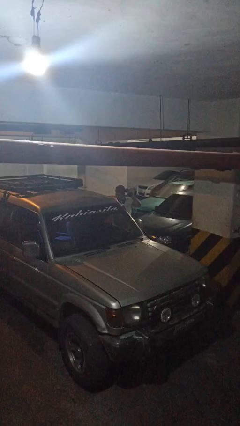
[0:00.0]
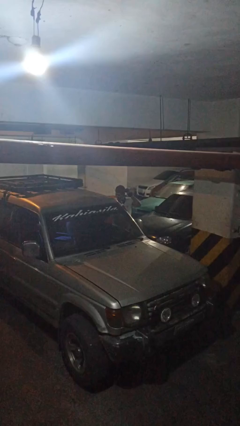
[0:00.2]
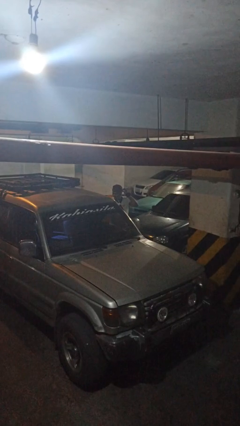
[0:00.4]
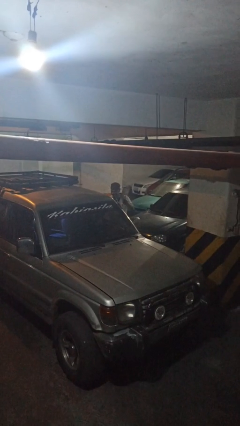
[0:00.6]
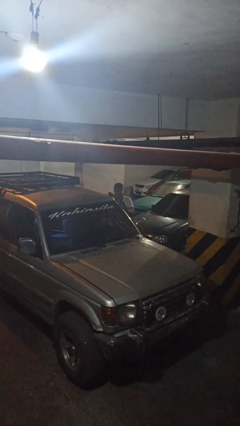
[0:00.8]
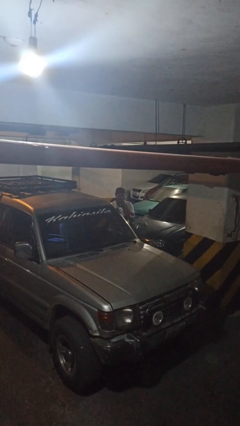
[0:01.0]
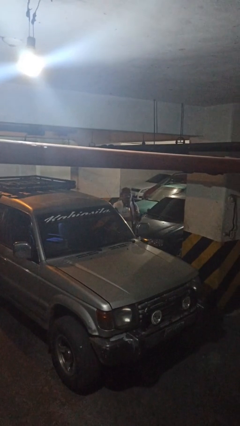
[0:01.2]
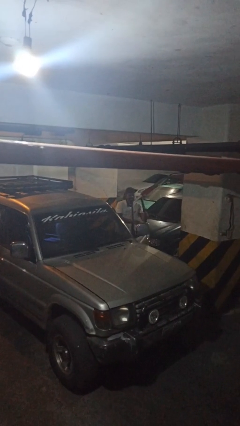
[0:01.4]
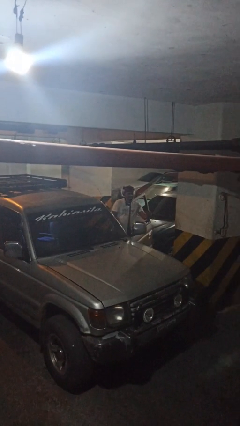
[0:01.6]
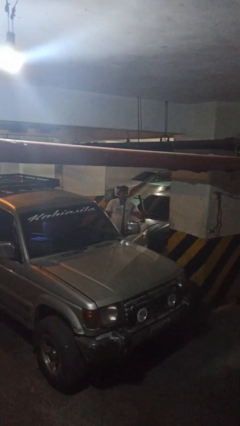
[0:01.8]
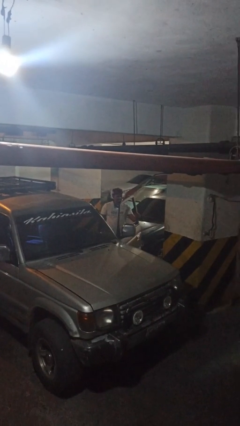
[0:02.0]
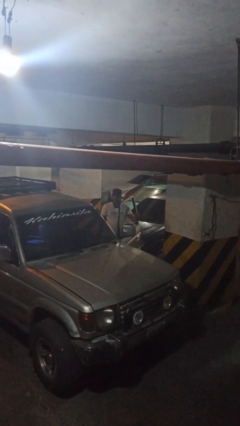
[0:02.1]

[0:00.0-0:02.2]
person opens car door

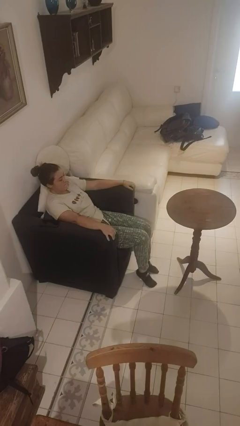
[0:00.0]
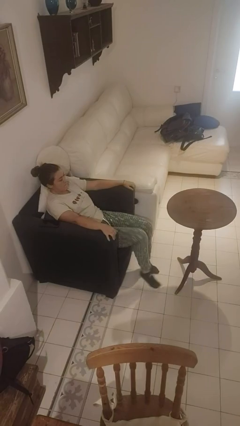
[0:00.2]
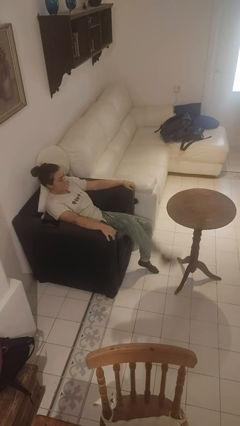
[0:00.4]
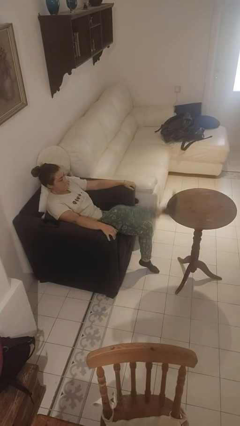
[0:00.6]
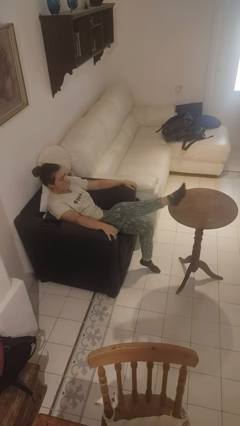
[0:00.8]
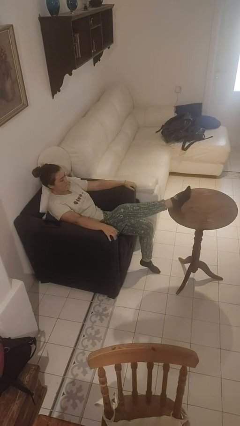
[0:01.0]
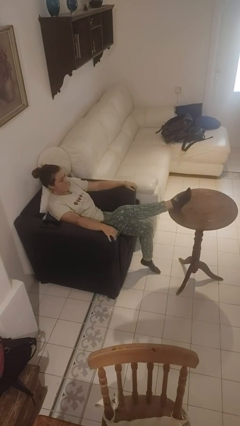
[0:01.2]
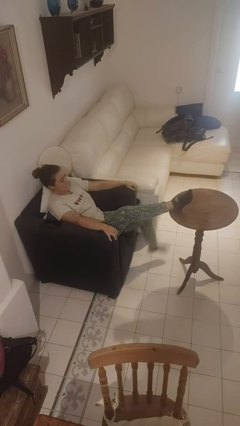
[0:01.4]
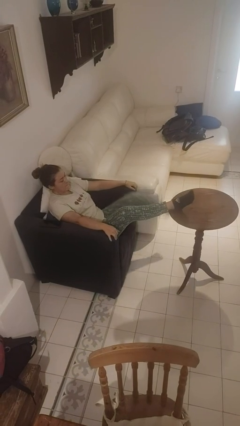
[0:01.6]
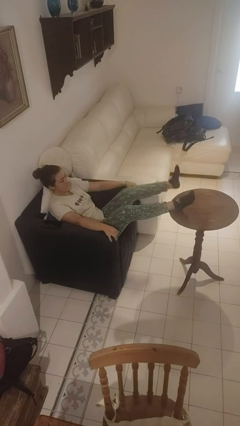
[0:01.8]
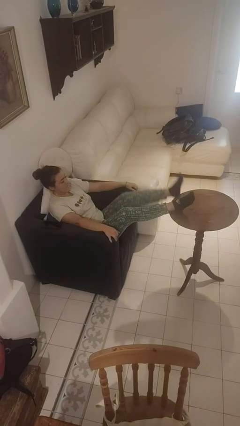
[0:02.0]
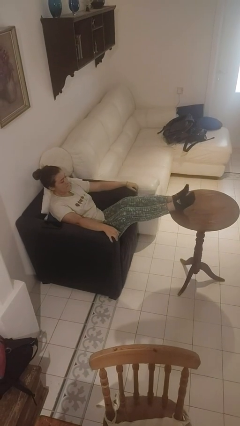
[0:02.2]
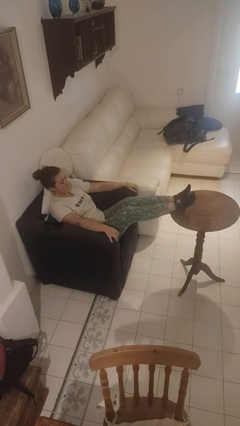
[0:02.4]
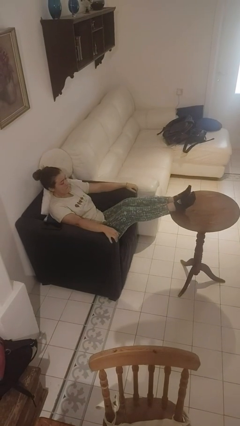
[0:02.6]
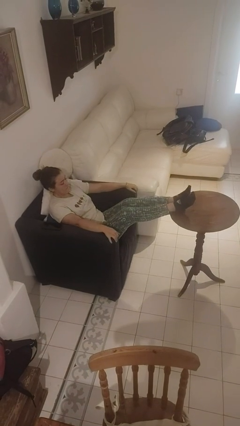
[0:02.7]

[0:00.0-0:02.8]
person puts feet up

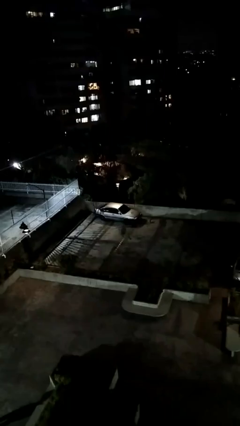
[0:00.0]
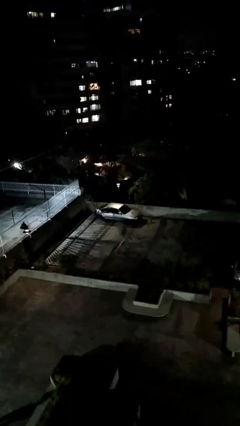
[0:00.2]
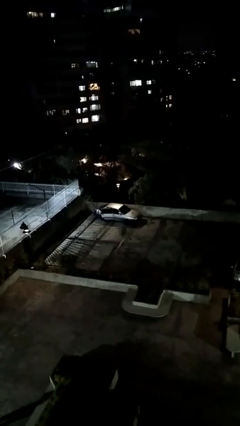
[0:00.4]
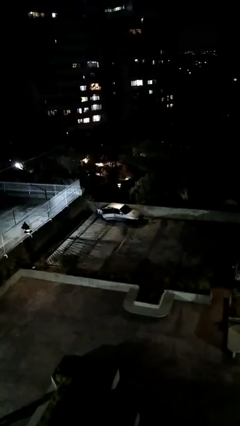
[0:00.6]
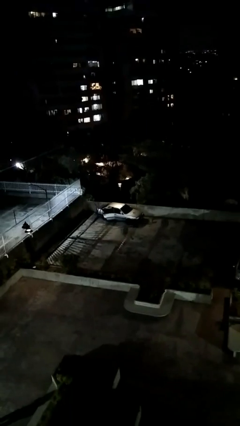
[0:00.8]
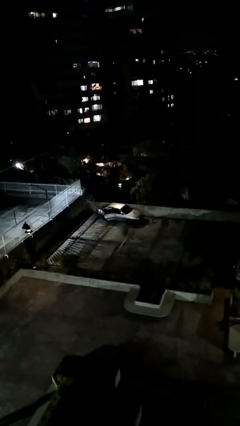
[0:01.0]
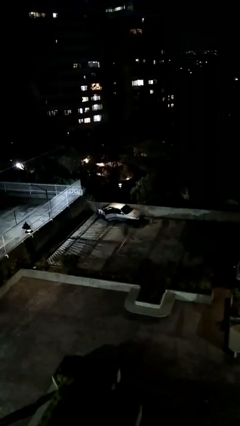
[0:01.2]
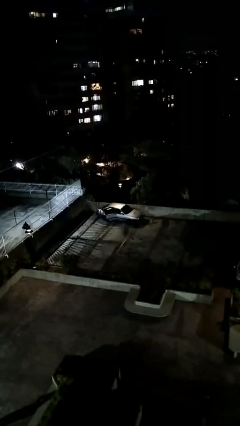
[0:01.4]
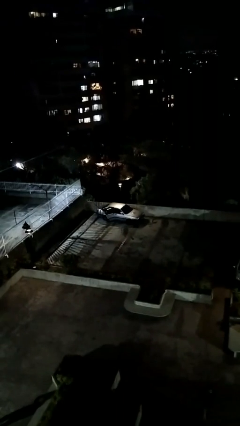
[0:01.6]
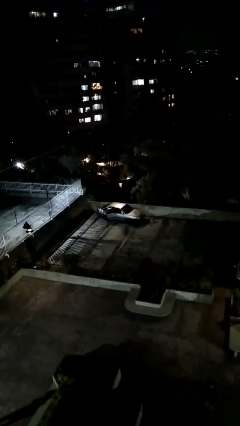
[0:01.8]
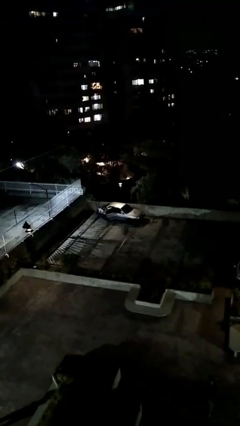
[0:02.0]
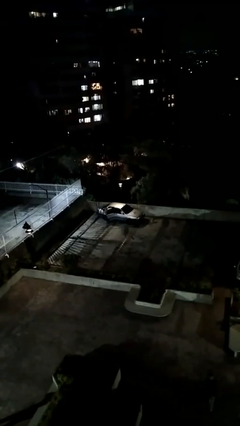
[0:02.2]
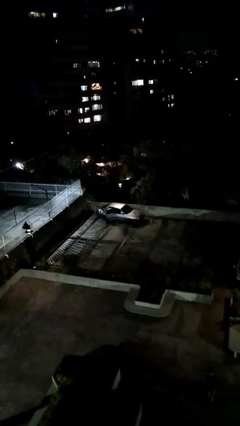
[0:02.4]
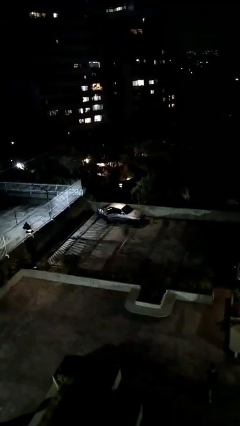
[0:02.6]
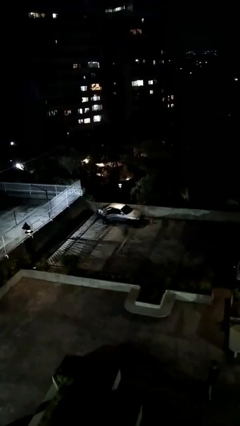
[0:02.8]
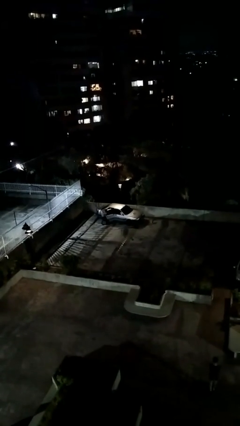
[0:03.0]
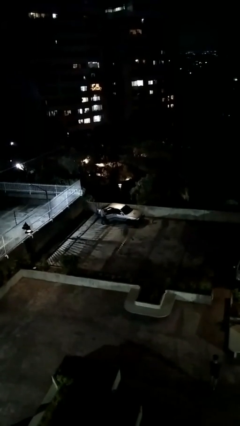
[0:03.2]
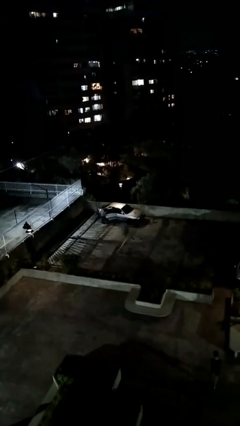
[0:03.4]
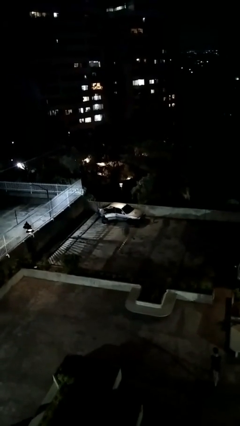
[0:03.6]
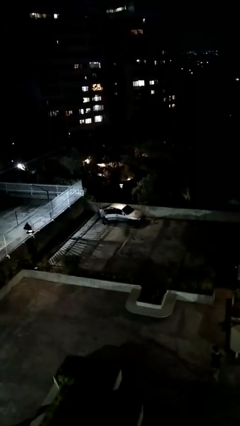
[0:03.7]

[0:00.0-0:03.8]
car drops off person

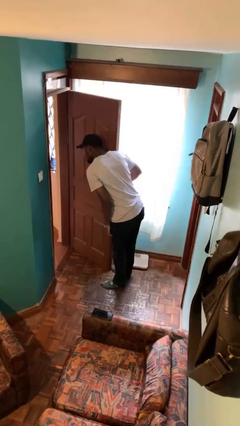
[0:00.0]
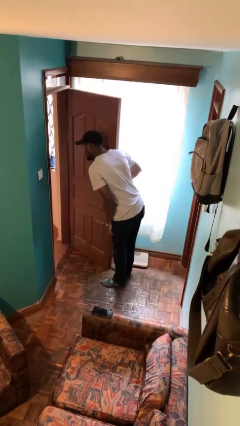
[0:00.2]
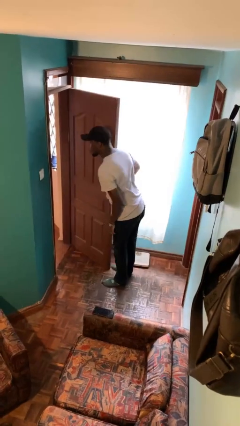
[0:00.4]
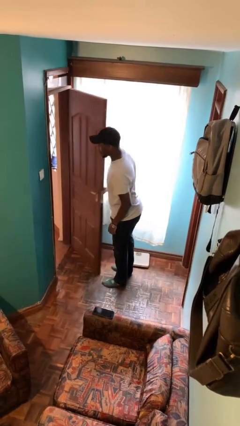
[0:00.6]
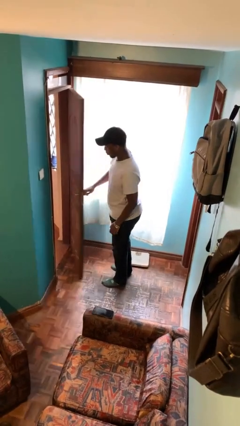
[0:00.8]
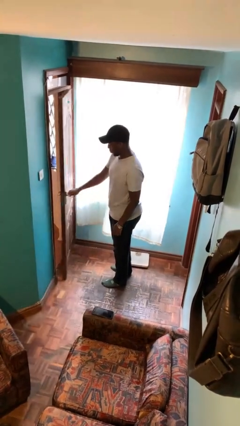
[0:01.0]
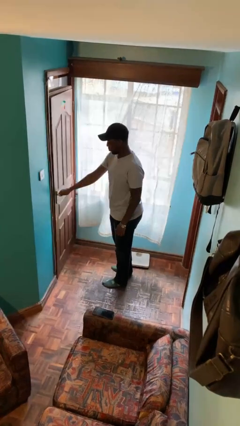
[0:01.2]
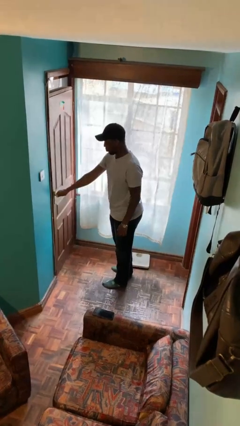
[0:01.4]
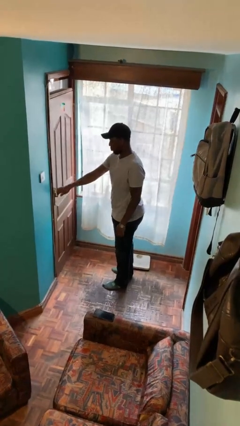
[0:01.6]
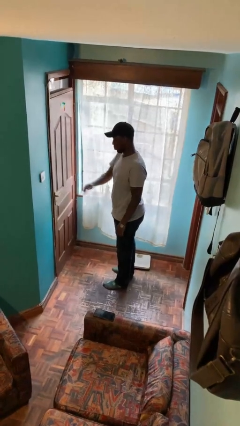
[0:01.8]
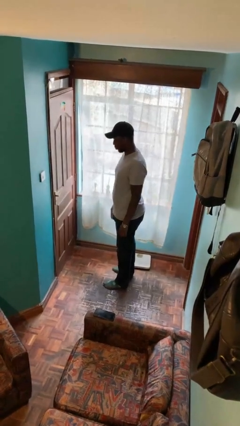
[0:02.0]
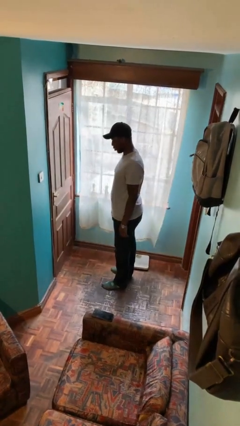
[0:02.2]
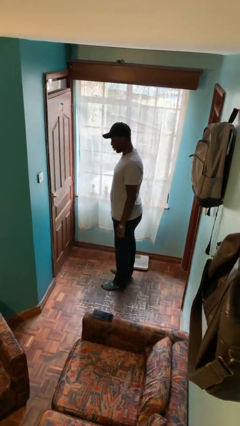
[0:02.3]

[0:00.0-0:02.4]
person closes facility door

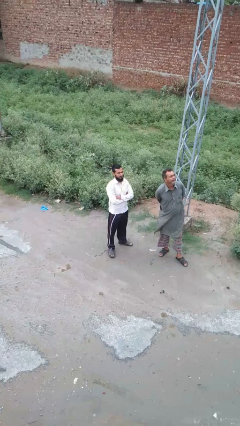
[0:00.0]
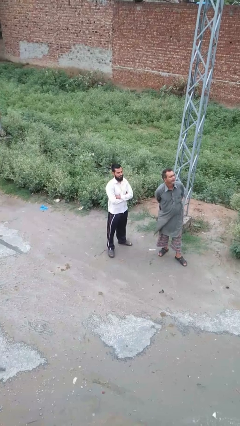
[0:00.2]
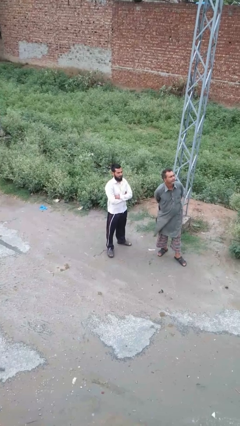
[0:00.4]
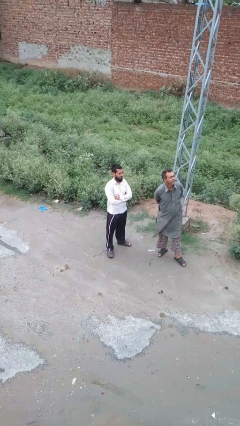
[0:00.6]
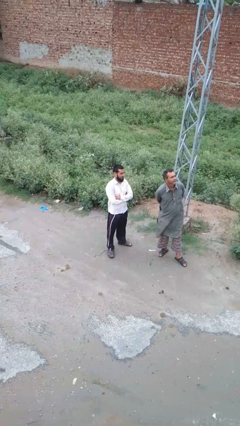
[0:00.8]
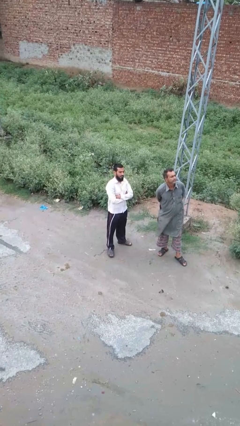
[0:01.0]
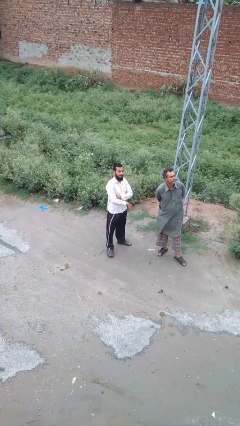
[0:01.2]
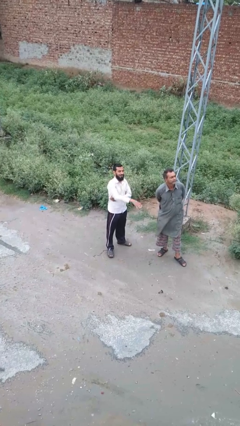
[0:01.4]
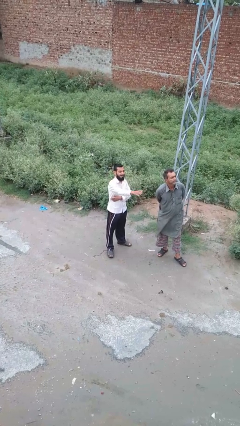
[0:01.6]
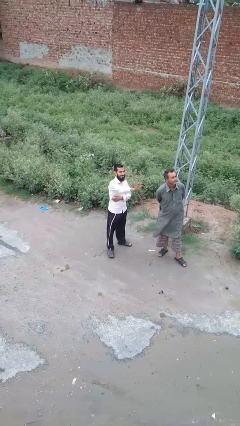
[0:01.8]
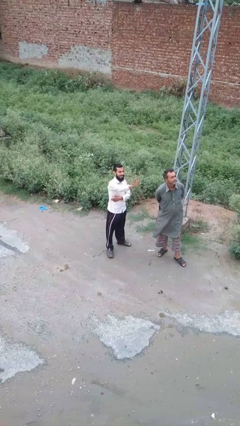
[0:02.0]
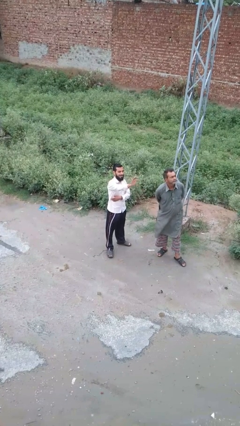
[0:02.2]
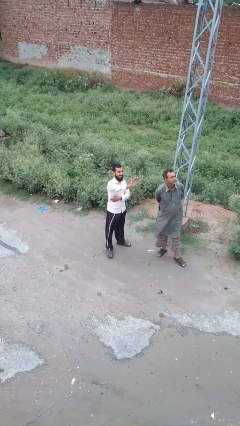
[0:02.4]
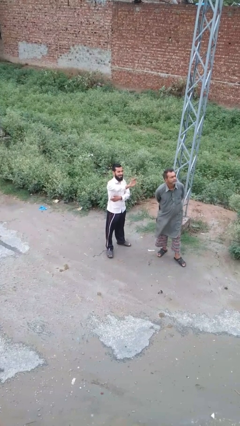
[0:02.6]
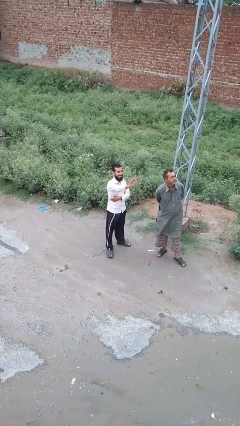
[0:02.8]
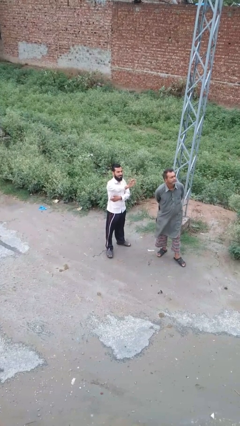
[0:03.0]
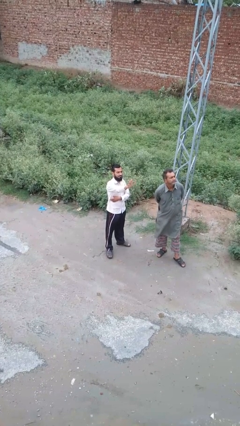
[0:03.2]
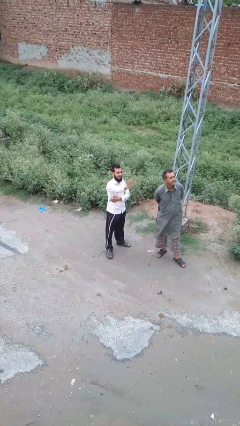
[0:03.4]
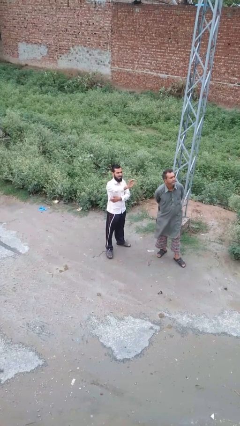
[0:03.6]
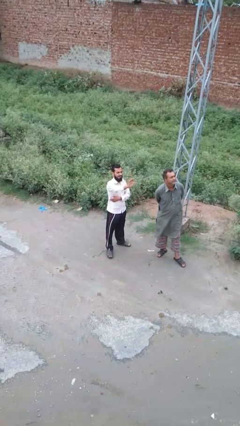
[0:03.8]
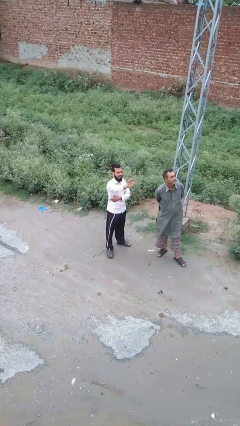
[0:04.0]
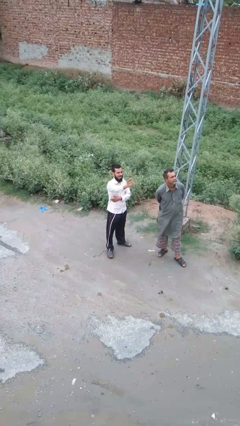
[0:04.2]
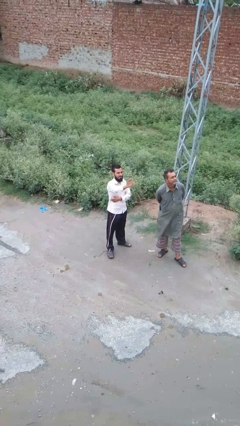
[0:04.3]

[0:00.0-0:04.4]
person waves at person

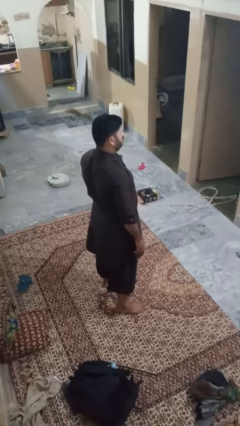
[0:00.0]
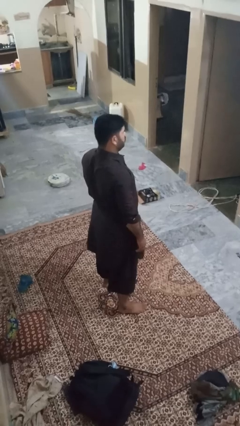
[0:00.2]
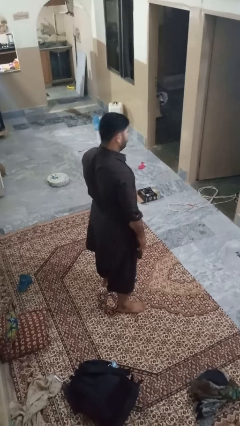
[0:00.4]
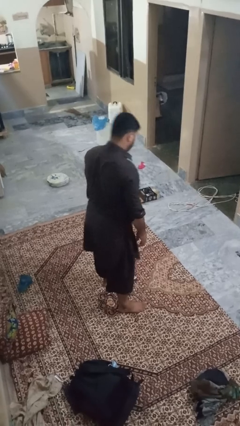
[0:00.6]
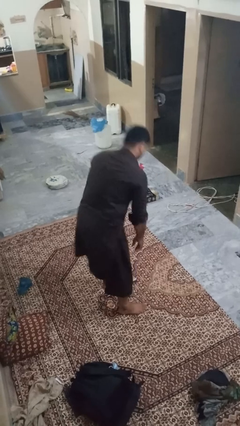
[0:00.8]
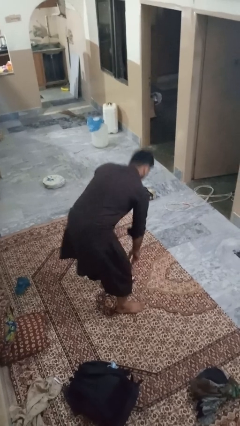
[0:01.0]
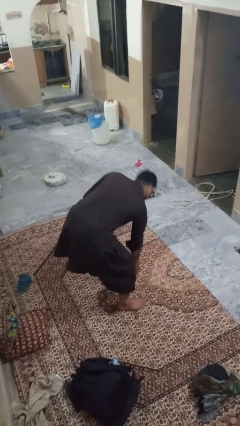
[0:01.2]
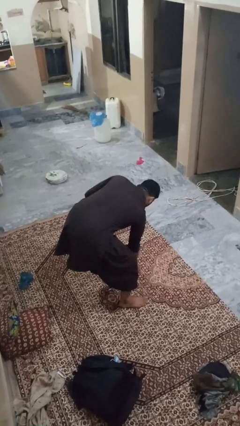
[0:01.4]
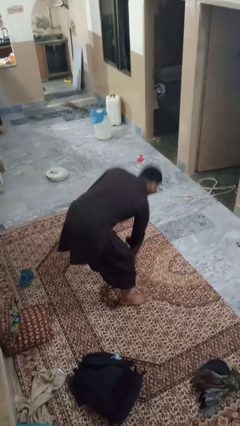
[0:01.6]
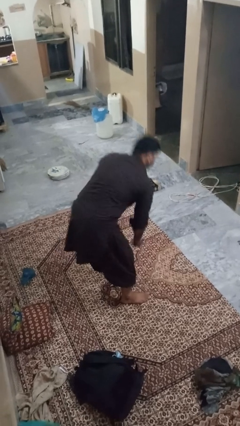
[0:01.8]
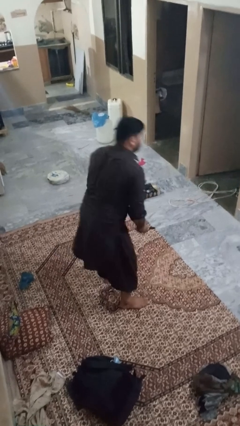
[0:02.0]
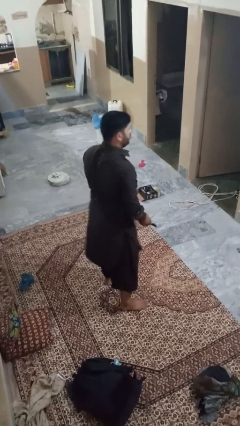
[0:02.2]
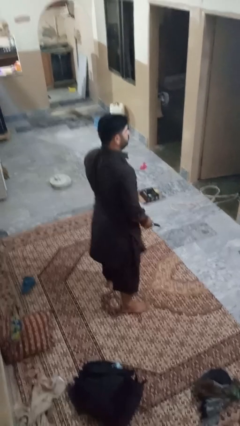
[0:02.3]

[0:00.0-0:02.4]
person picks up object from floor
